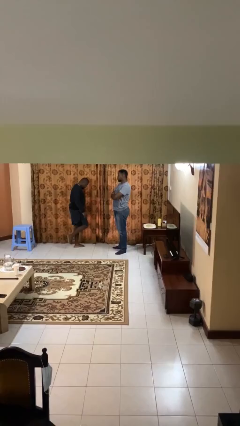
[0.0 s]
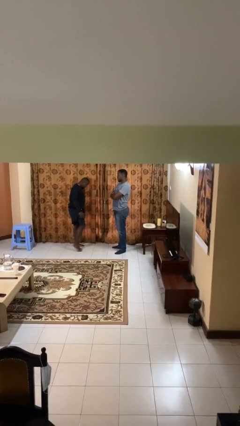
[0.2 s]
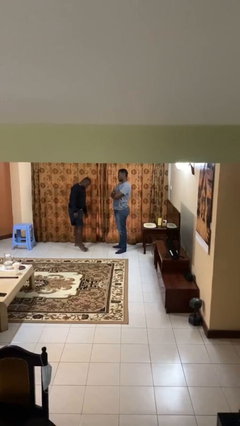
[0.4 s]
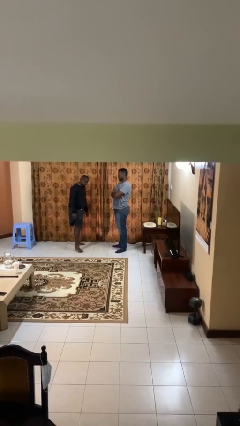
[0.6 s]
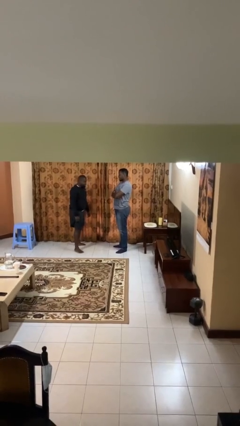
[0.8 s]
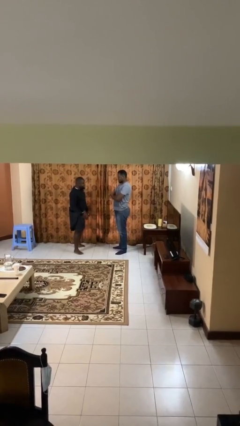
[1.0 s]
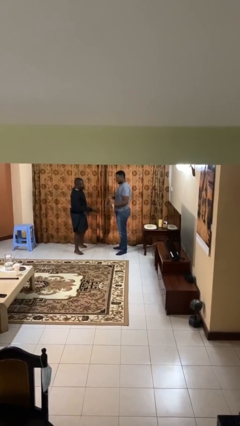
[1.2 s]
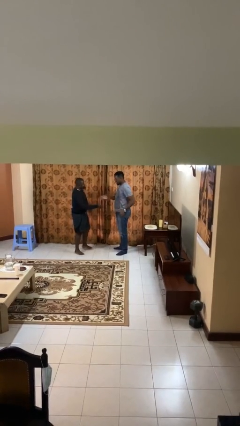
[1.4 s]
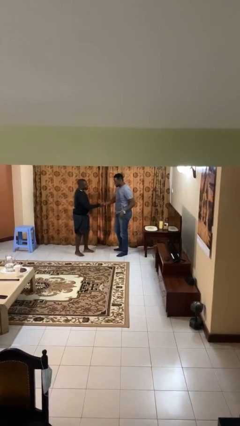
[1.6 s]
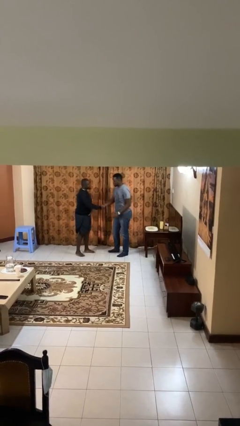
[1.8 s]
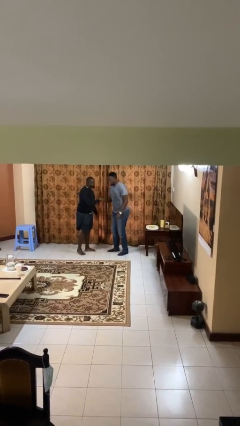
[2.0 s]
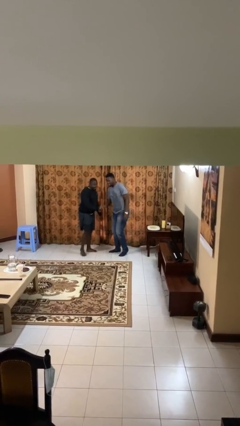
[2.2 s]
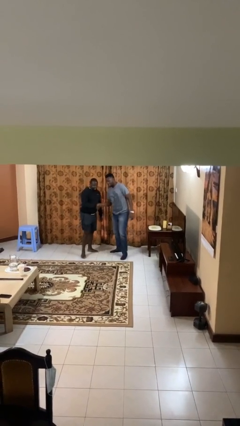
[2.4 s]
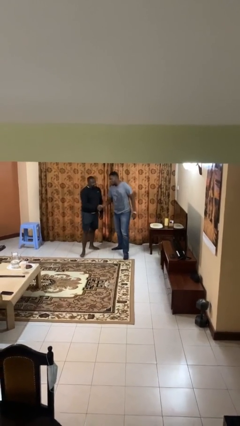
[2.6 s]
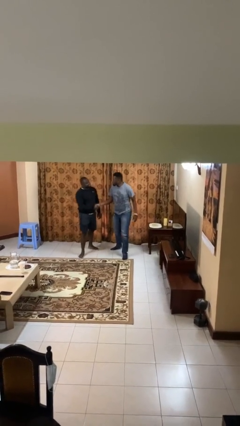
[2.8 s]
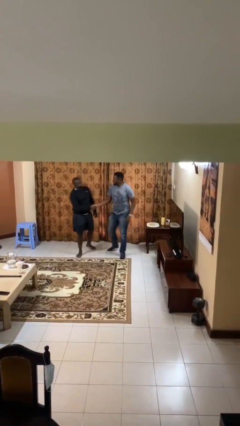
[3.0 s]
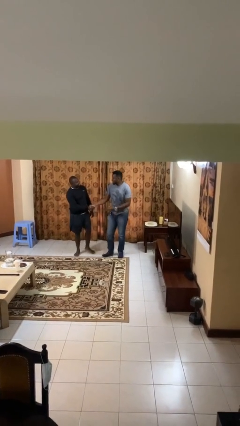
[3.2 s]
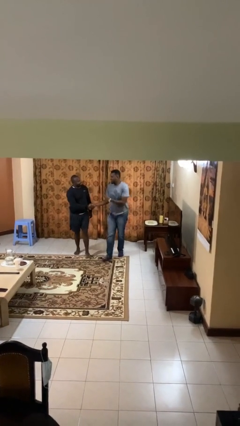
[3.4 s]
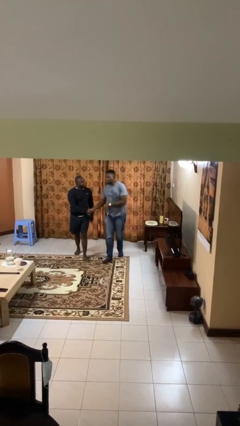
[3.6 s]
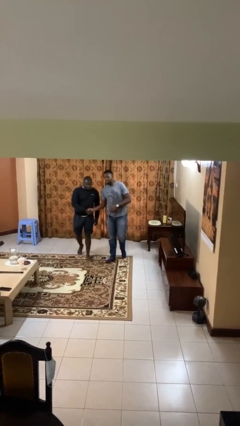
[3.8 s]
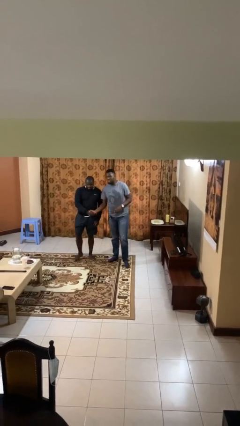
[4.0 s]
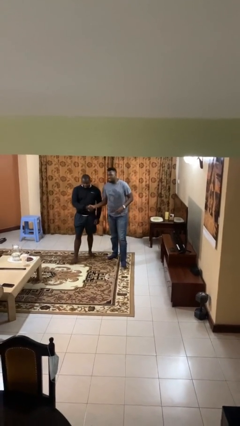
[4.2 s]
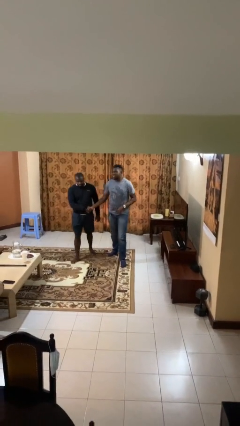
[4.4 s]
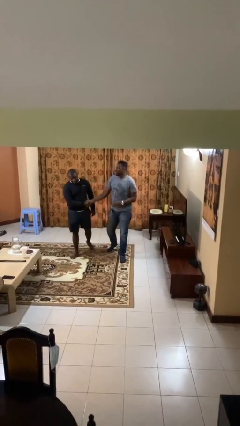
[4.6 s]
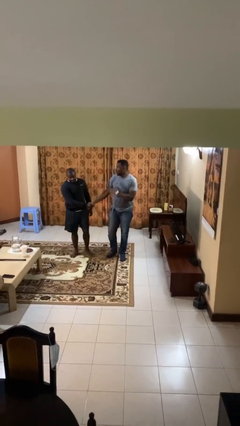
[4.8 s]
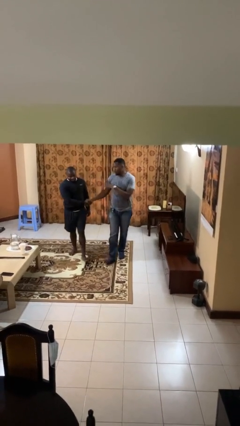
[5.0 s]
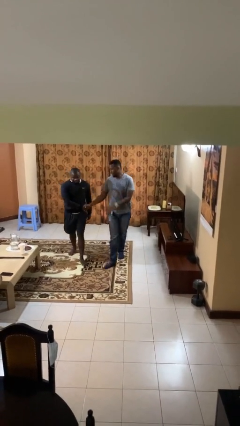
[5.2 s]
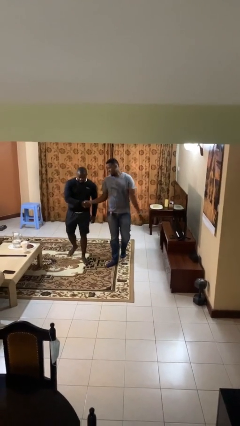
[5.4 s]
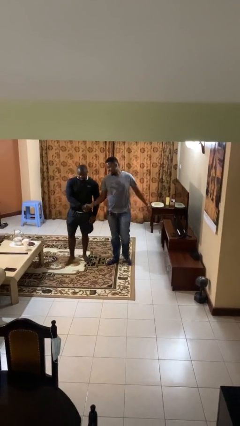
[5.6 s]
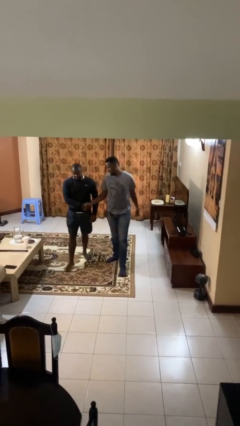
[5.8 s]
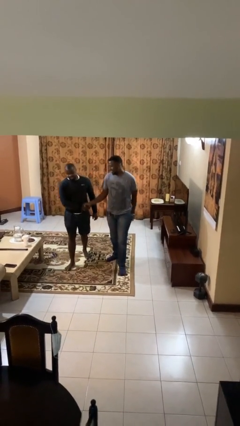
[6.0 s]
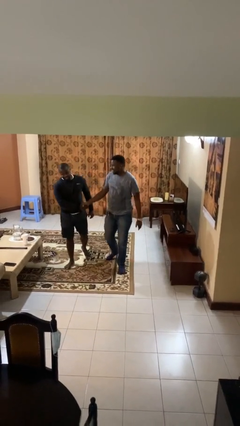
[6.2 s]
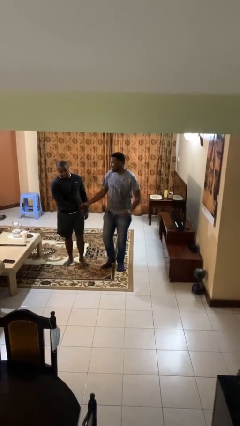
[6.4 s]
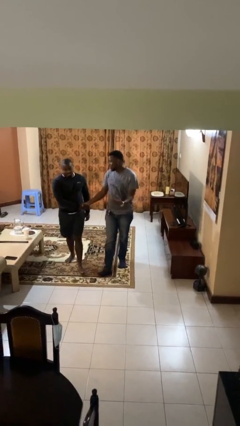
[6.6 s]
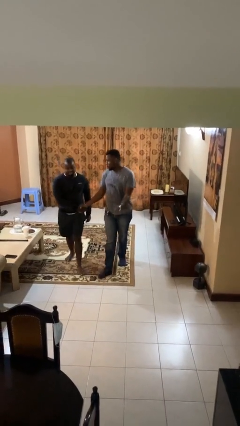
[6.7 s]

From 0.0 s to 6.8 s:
person holds hand

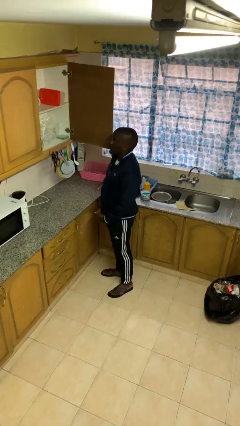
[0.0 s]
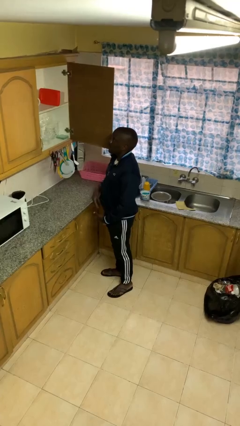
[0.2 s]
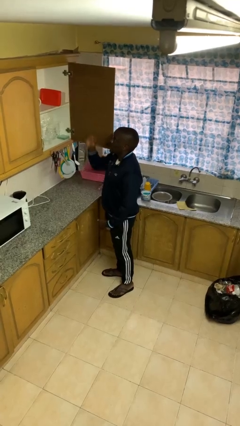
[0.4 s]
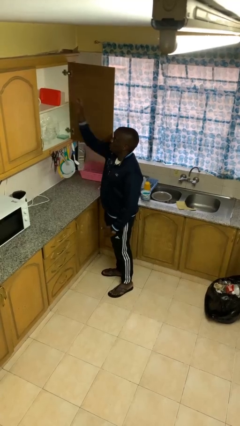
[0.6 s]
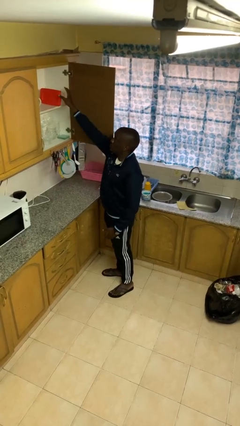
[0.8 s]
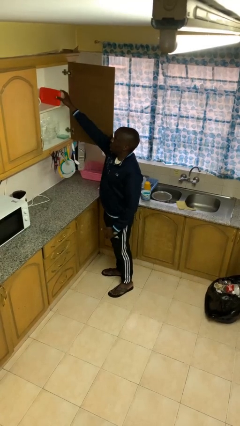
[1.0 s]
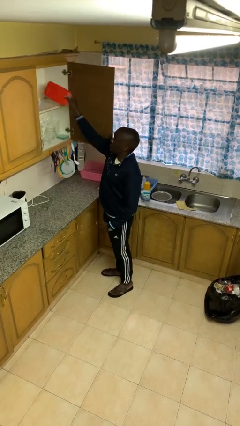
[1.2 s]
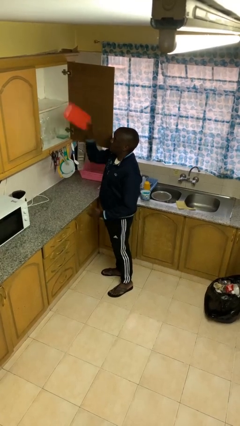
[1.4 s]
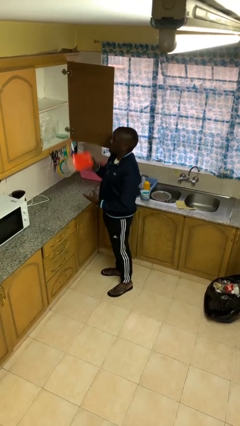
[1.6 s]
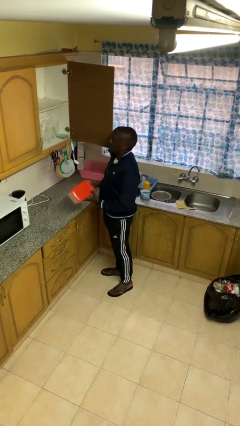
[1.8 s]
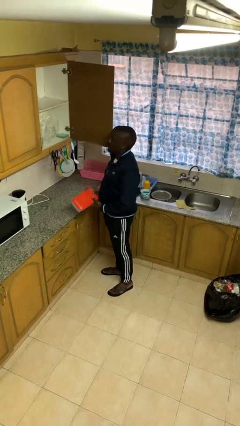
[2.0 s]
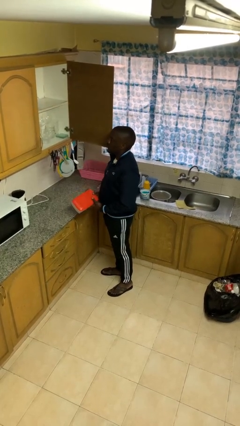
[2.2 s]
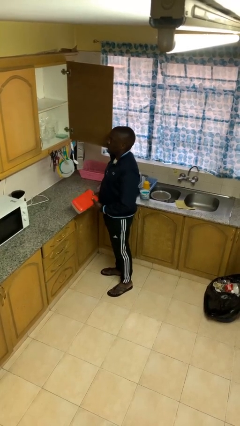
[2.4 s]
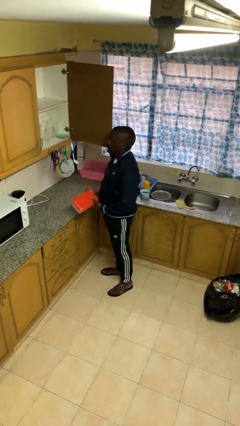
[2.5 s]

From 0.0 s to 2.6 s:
person picks up object from shelf

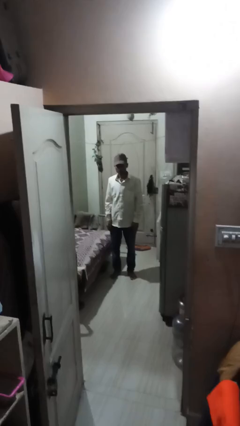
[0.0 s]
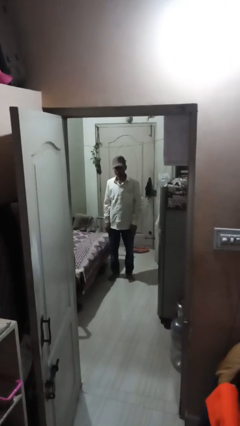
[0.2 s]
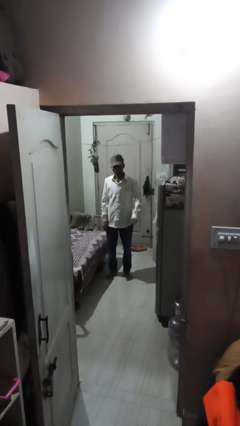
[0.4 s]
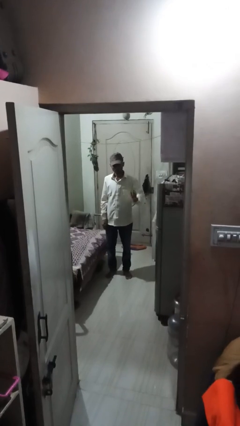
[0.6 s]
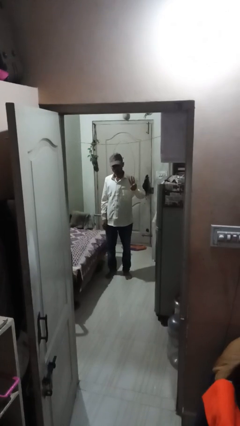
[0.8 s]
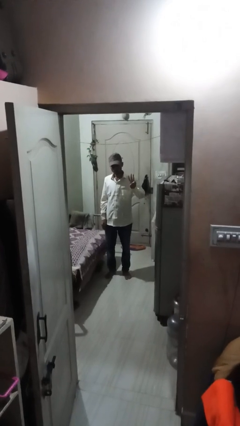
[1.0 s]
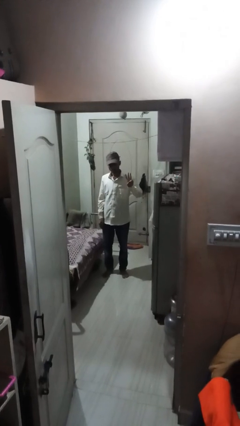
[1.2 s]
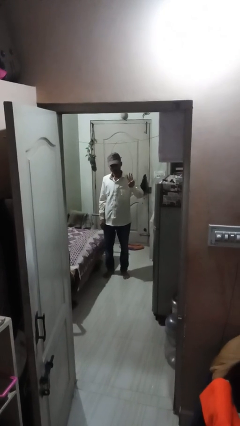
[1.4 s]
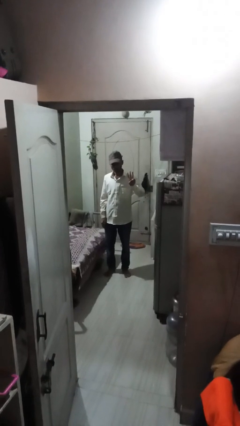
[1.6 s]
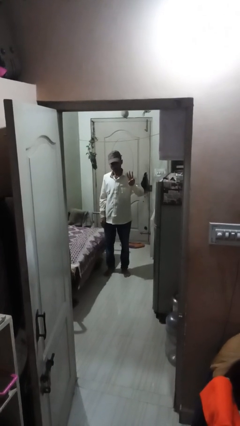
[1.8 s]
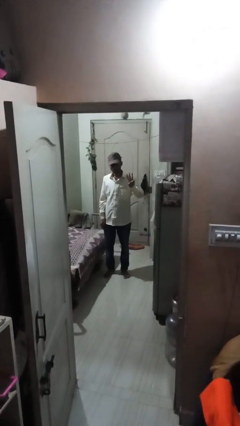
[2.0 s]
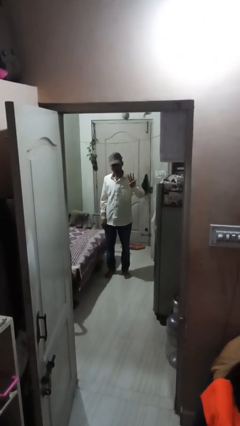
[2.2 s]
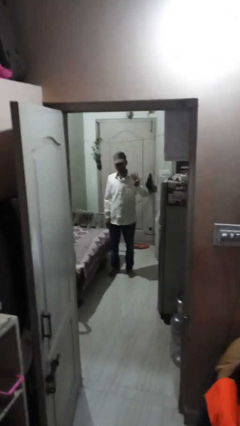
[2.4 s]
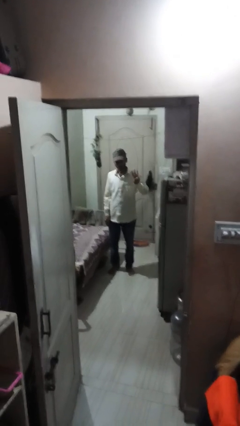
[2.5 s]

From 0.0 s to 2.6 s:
person gestures number three

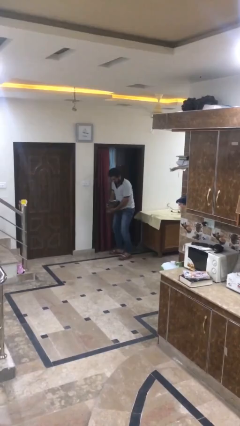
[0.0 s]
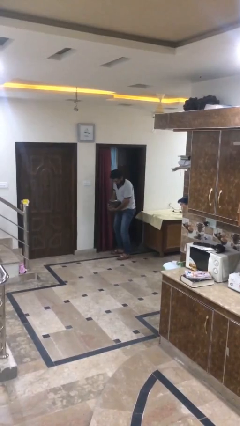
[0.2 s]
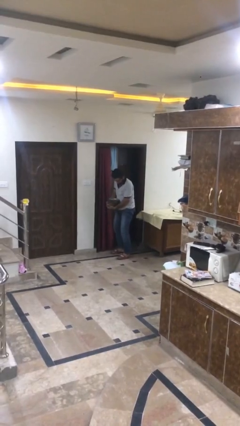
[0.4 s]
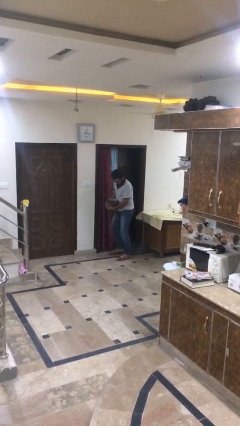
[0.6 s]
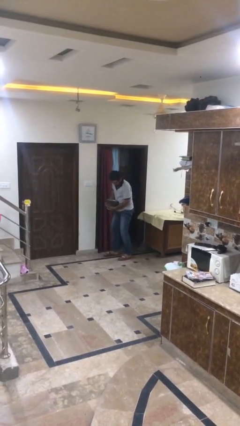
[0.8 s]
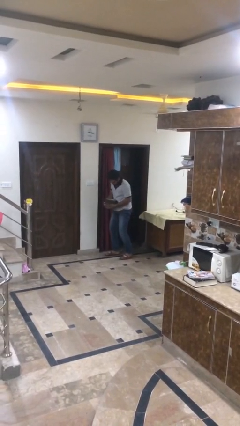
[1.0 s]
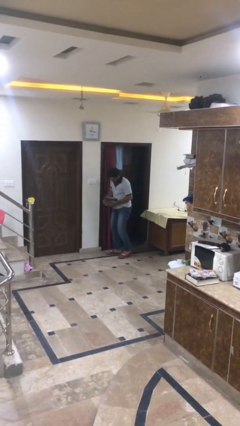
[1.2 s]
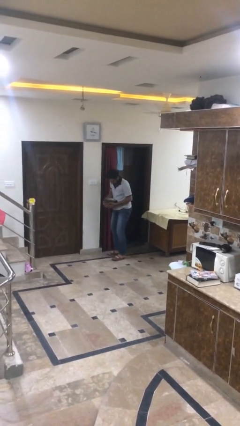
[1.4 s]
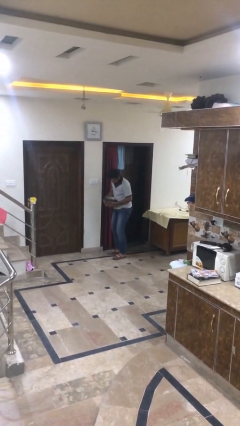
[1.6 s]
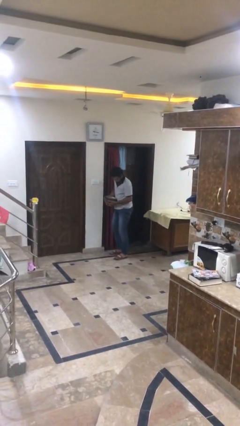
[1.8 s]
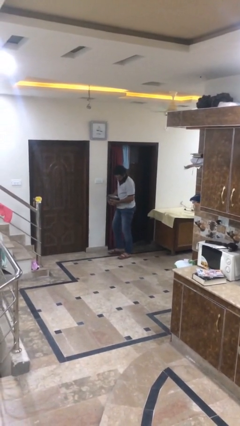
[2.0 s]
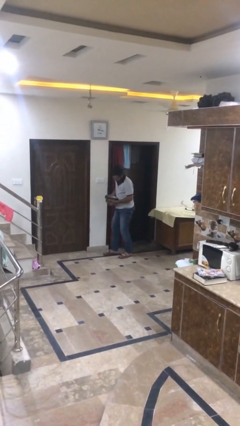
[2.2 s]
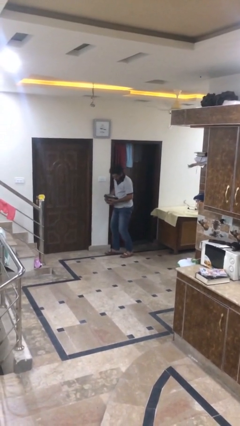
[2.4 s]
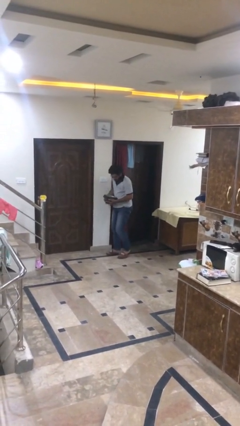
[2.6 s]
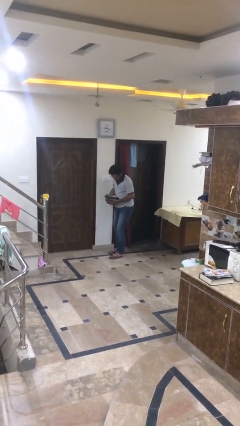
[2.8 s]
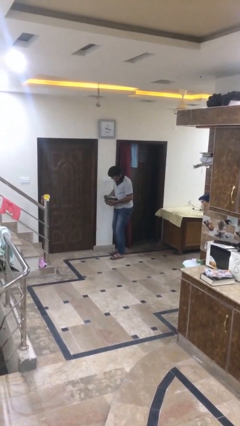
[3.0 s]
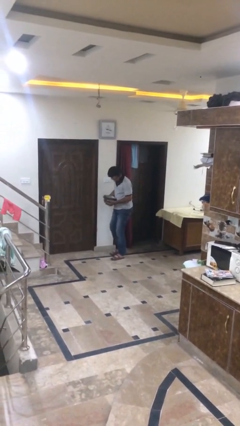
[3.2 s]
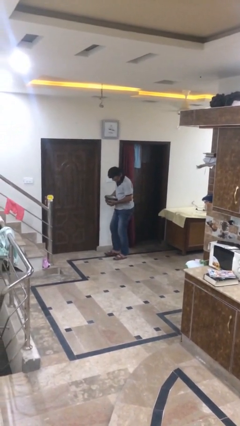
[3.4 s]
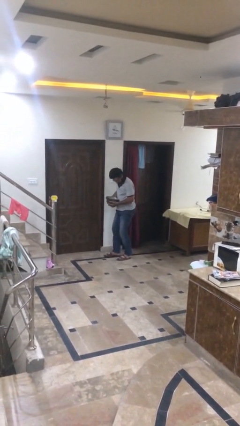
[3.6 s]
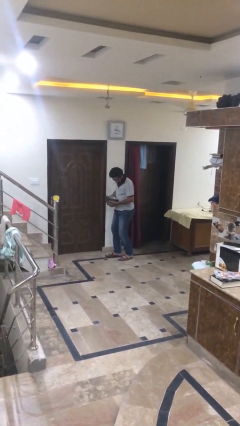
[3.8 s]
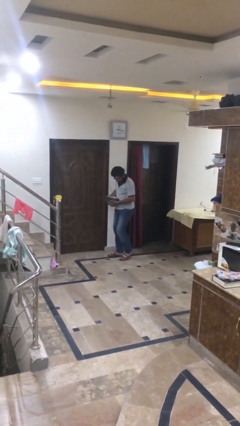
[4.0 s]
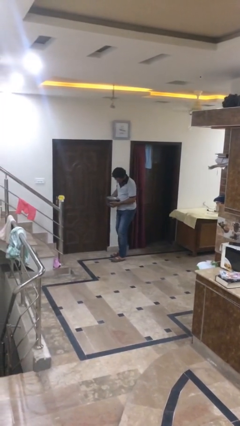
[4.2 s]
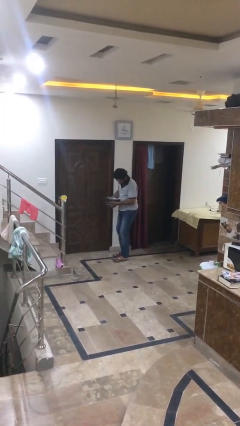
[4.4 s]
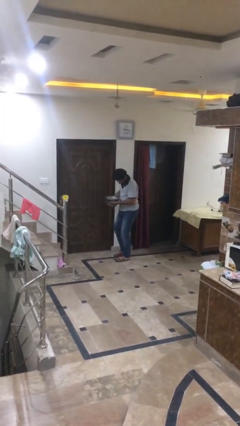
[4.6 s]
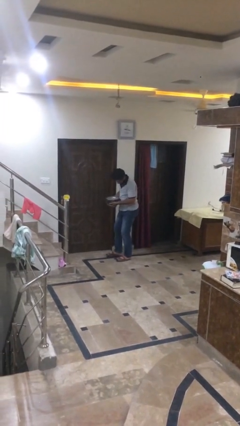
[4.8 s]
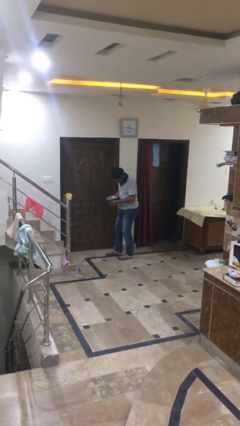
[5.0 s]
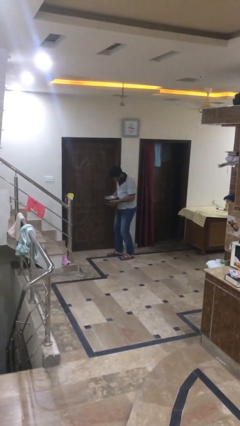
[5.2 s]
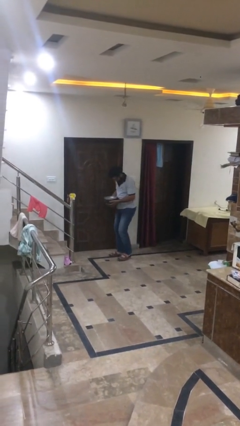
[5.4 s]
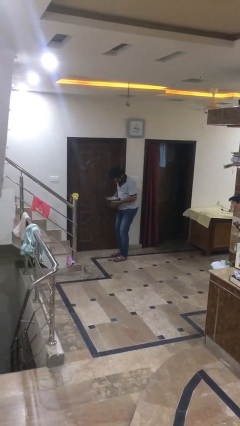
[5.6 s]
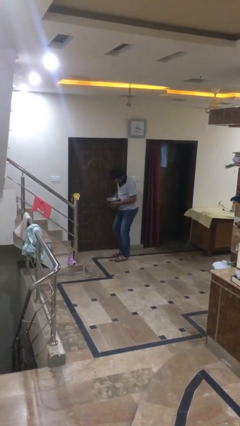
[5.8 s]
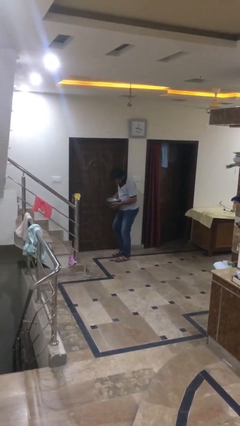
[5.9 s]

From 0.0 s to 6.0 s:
person carries heavy object
